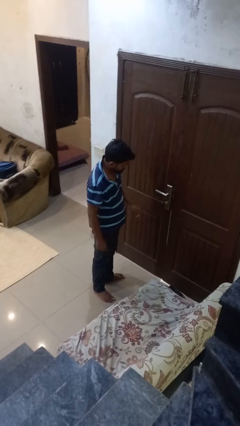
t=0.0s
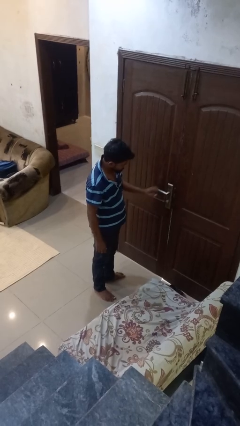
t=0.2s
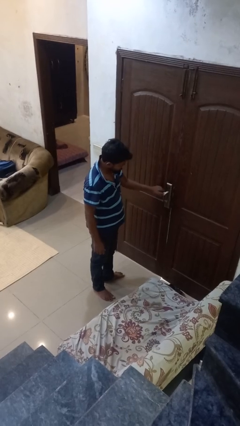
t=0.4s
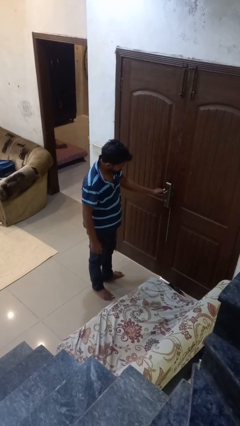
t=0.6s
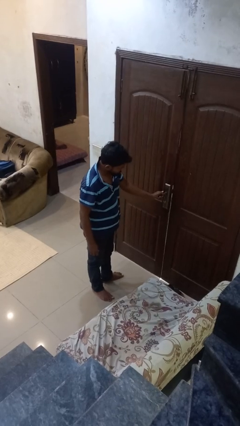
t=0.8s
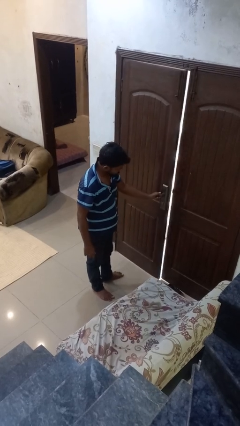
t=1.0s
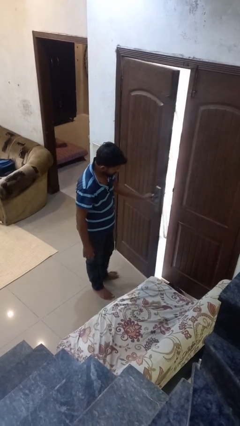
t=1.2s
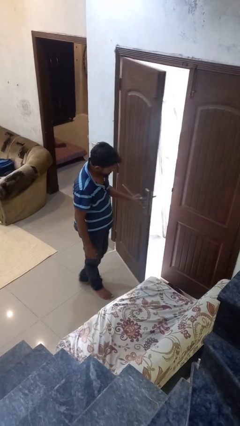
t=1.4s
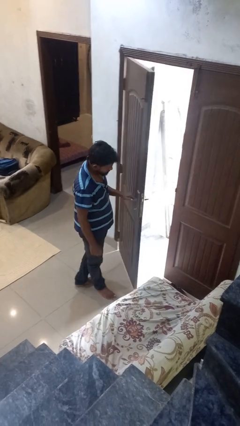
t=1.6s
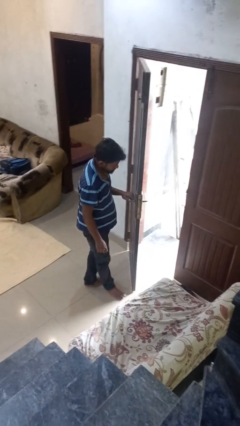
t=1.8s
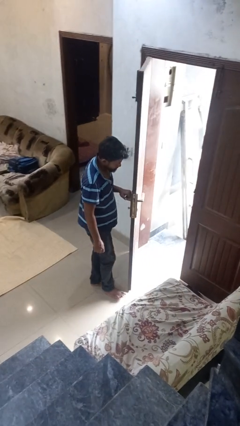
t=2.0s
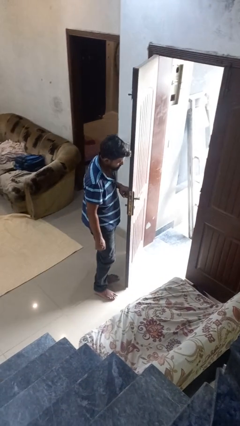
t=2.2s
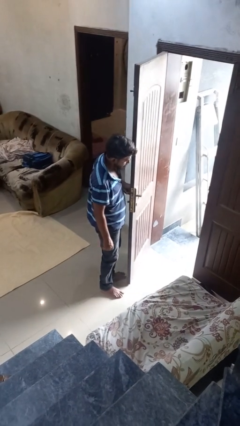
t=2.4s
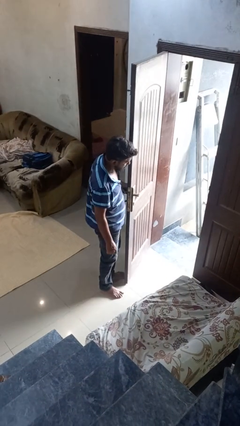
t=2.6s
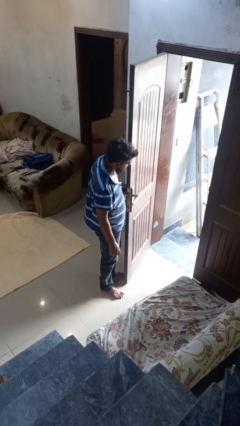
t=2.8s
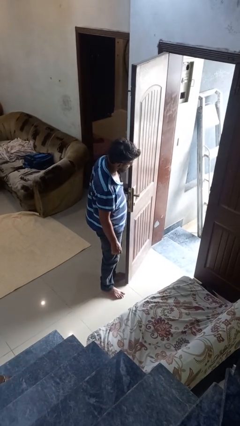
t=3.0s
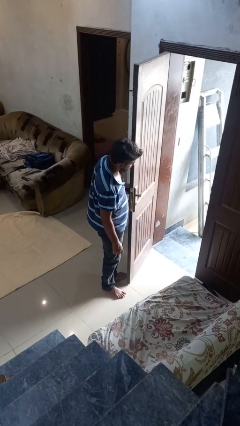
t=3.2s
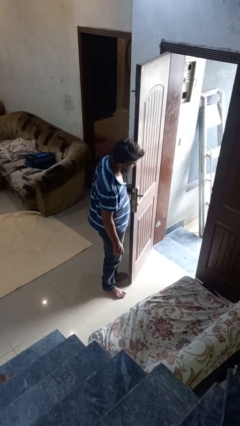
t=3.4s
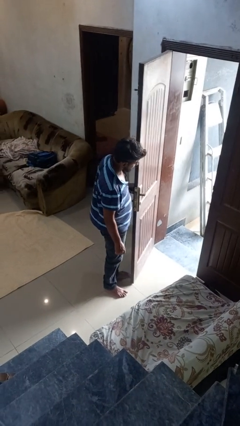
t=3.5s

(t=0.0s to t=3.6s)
person opens facility door

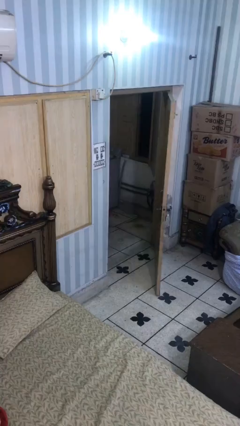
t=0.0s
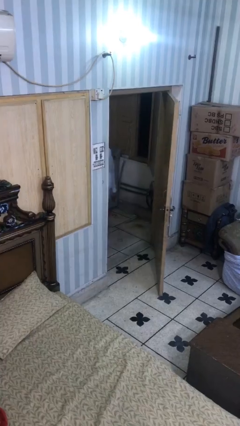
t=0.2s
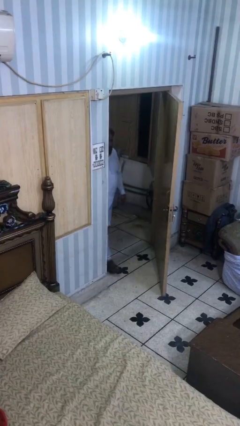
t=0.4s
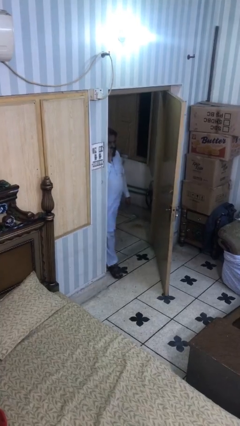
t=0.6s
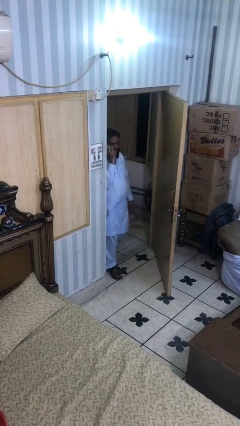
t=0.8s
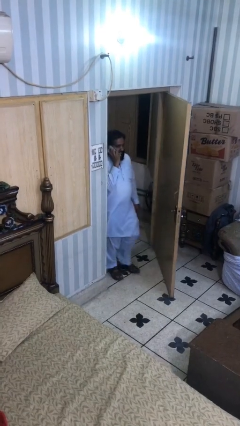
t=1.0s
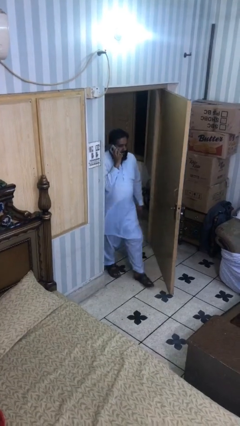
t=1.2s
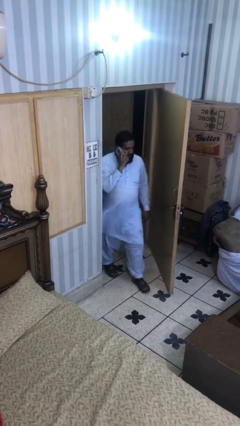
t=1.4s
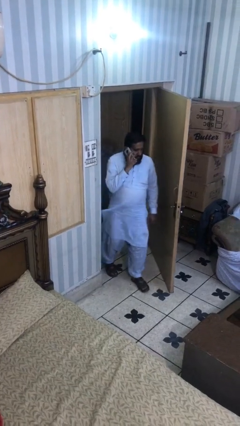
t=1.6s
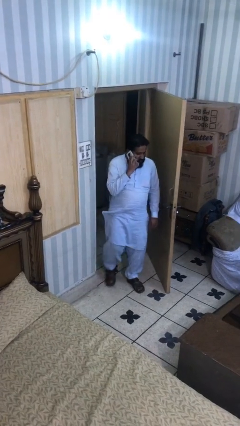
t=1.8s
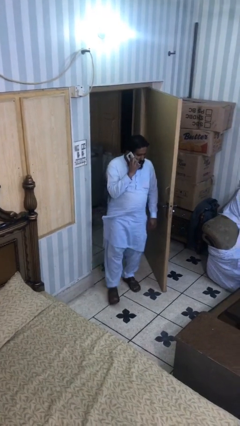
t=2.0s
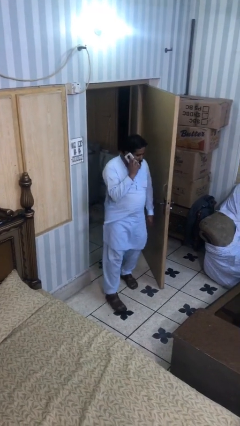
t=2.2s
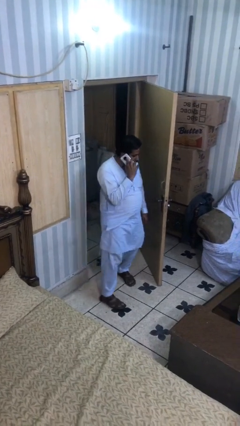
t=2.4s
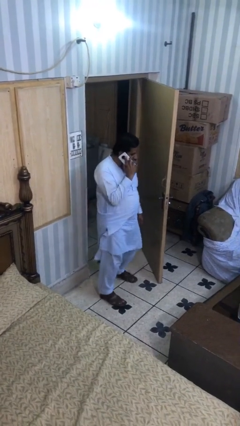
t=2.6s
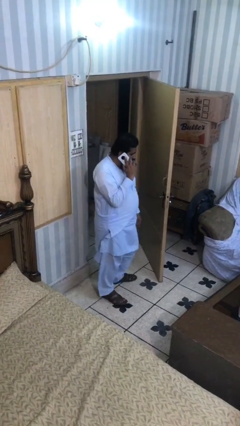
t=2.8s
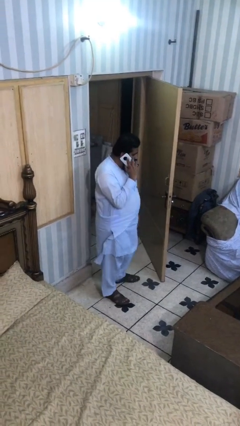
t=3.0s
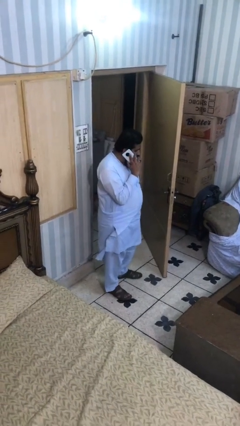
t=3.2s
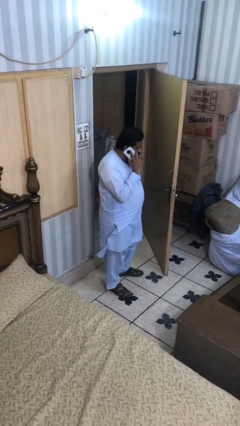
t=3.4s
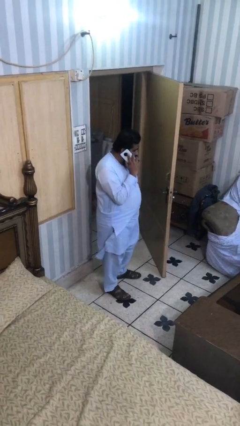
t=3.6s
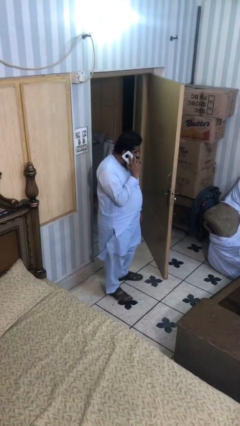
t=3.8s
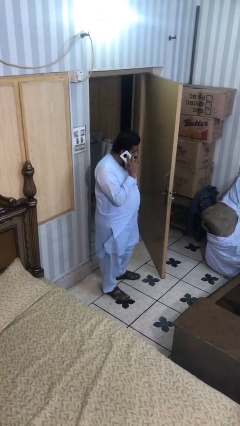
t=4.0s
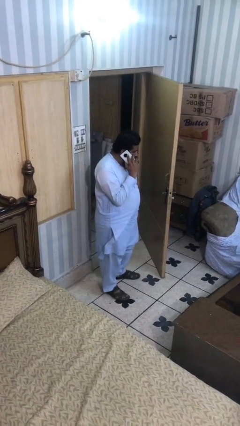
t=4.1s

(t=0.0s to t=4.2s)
person enters scene through structure

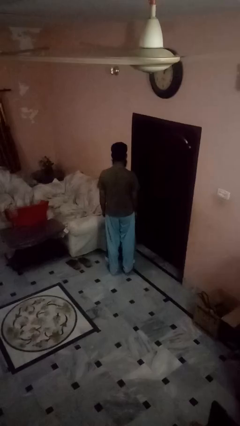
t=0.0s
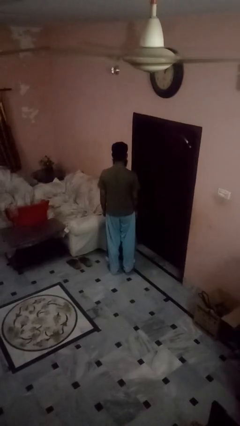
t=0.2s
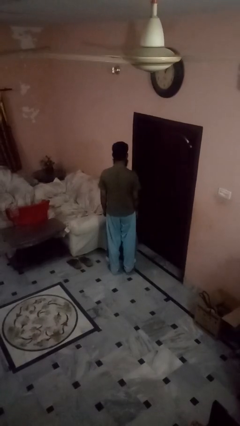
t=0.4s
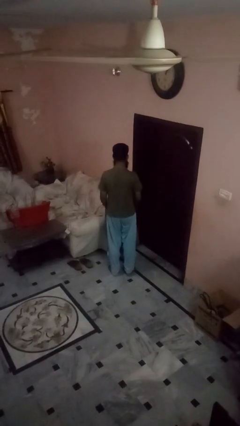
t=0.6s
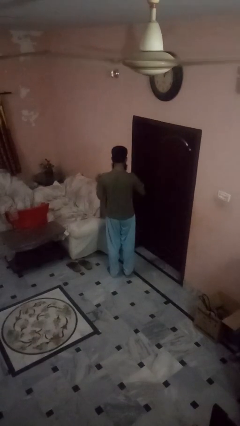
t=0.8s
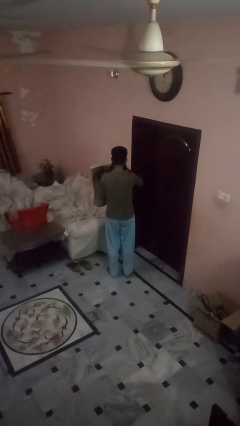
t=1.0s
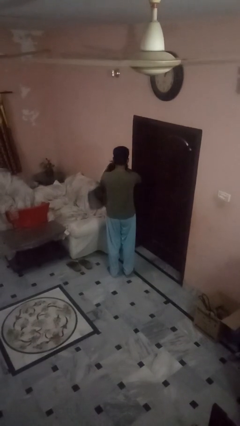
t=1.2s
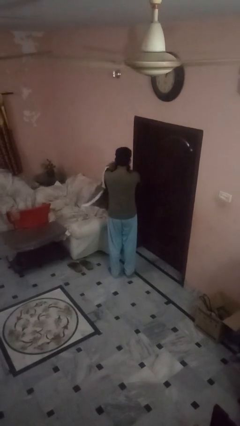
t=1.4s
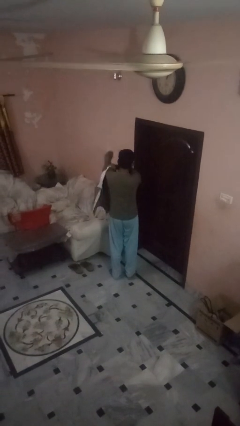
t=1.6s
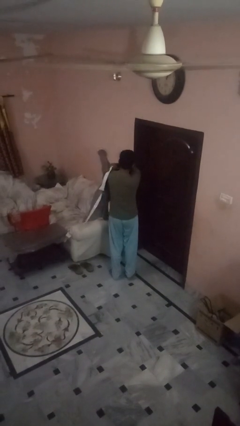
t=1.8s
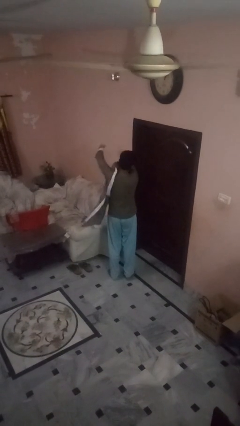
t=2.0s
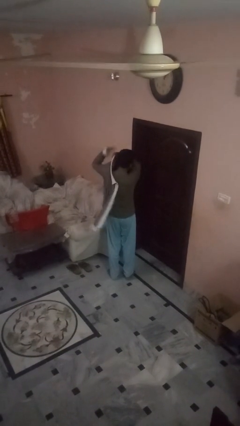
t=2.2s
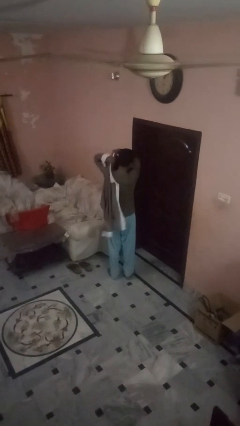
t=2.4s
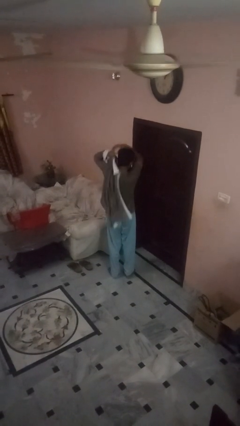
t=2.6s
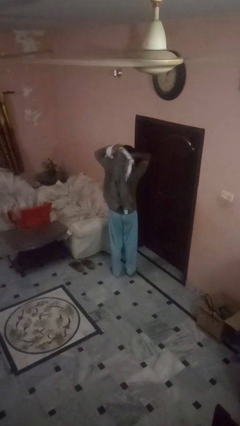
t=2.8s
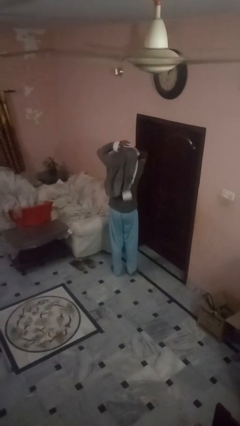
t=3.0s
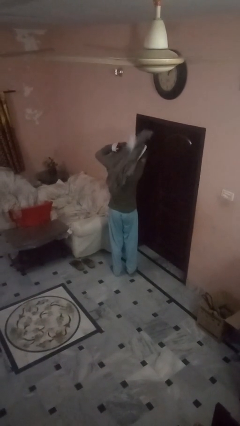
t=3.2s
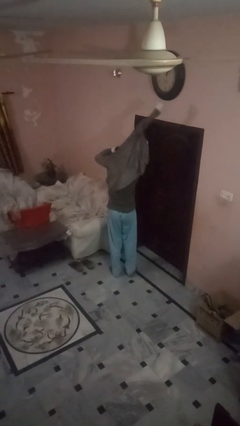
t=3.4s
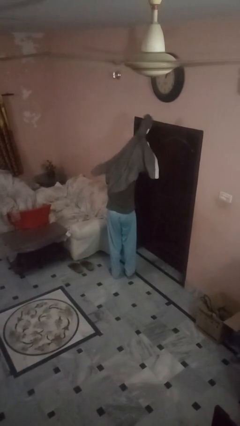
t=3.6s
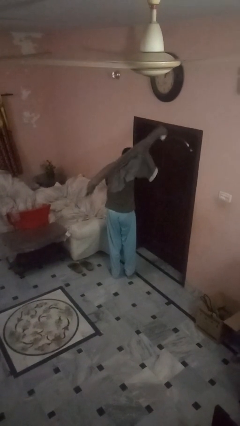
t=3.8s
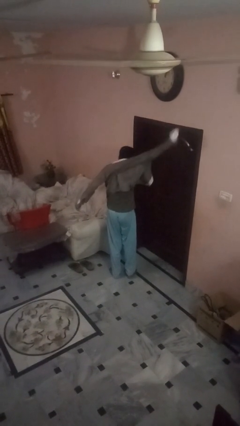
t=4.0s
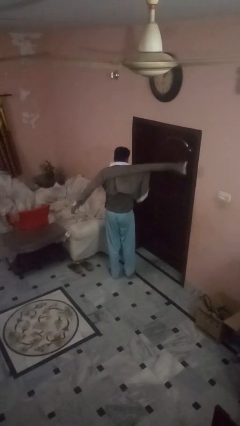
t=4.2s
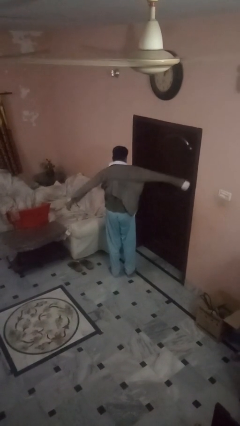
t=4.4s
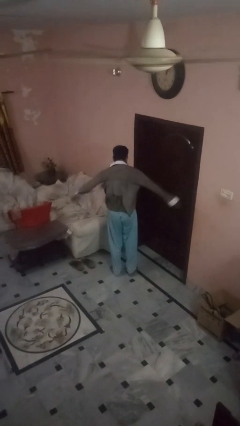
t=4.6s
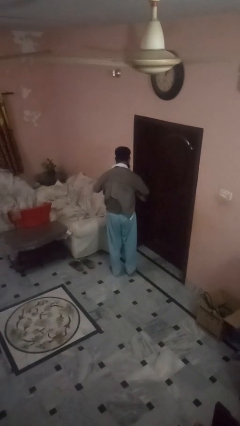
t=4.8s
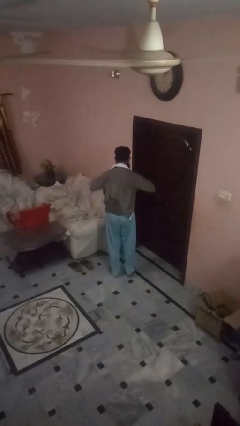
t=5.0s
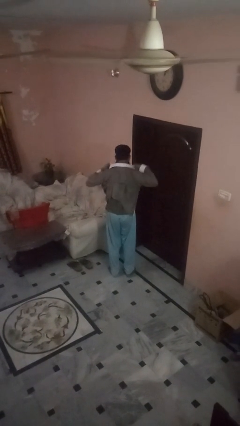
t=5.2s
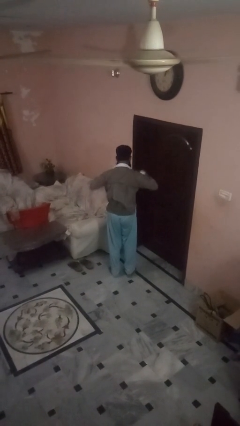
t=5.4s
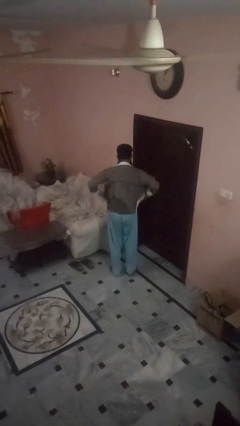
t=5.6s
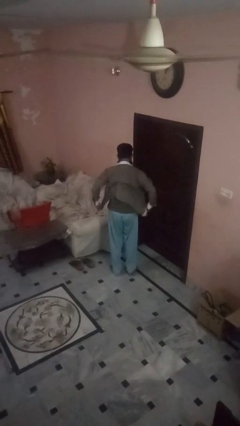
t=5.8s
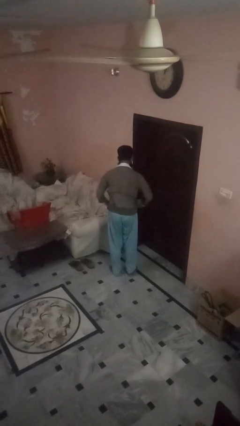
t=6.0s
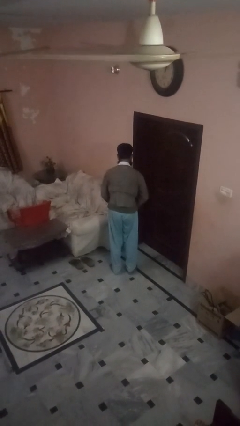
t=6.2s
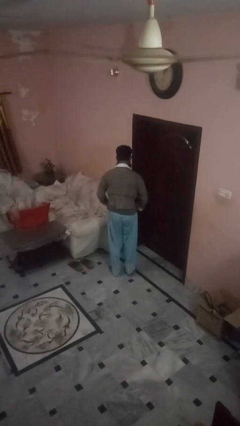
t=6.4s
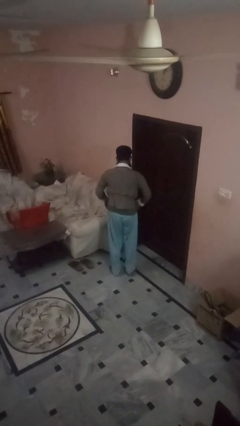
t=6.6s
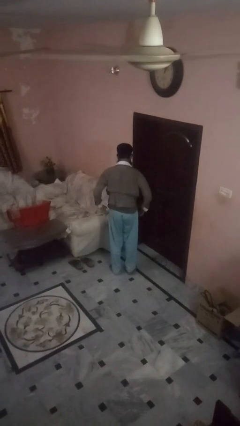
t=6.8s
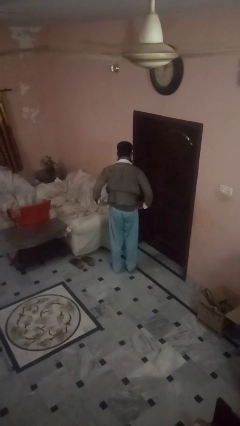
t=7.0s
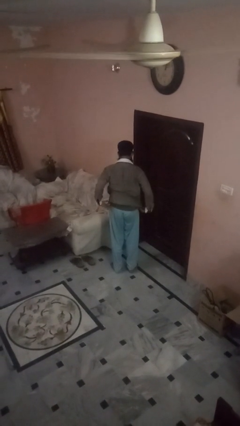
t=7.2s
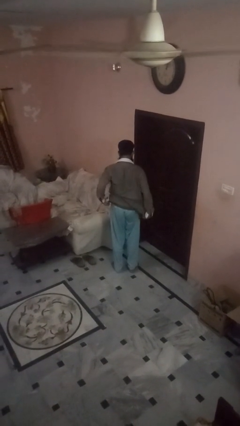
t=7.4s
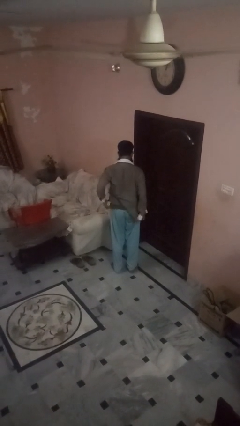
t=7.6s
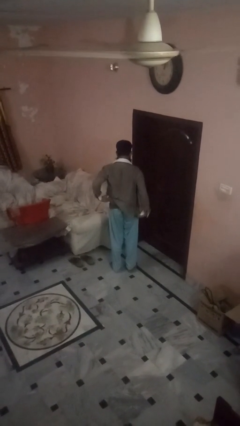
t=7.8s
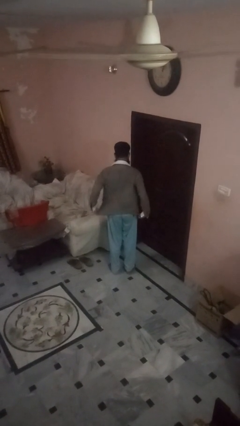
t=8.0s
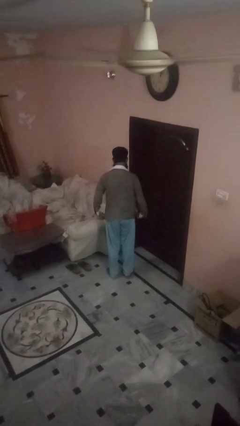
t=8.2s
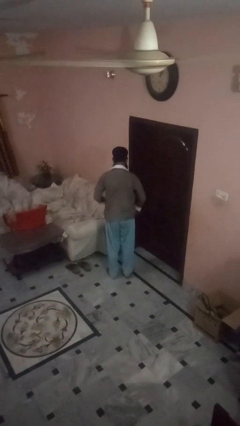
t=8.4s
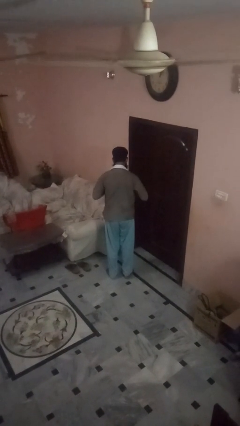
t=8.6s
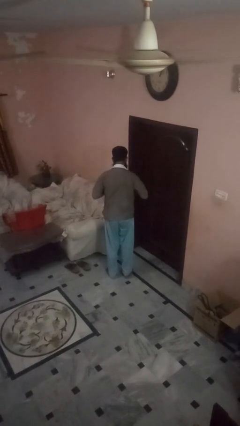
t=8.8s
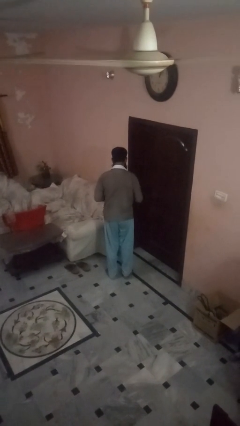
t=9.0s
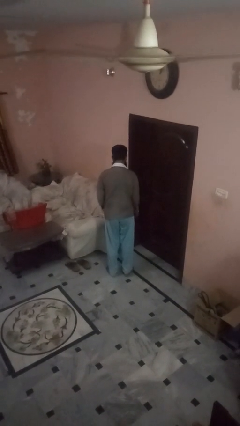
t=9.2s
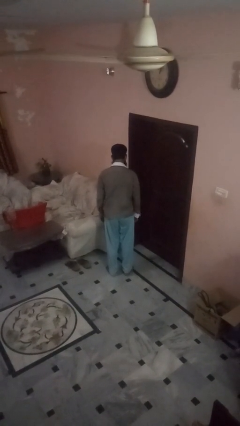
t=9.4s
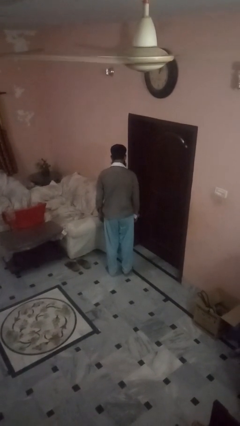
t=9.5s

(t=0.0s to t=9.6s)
person puts on shirt

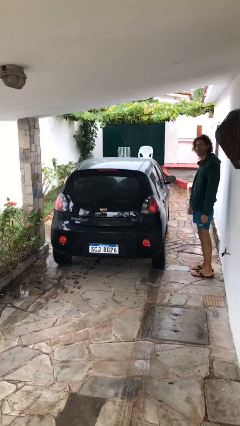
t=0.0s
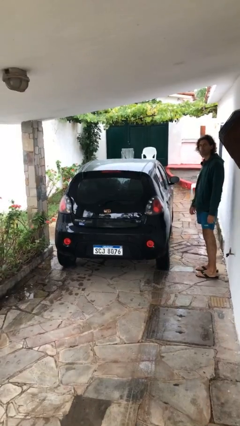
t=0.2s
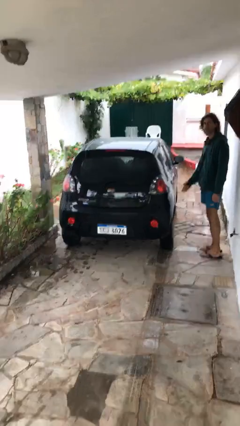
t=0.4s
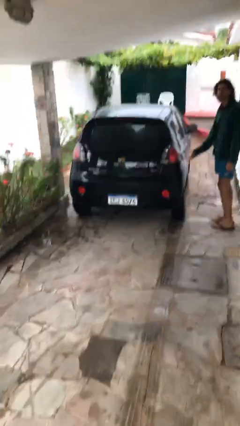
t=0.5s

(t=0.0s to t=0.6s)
car picks up person
